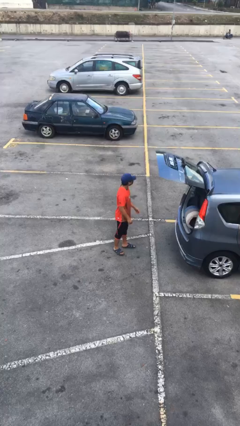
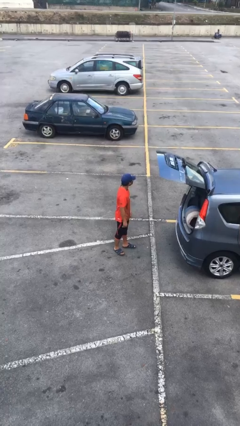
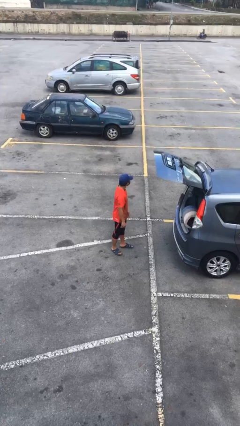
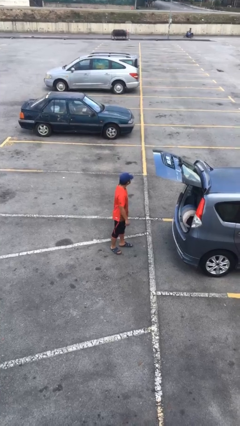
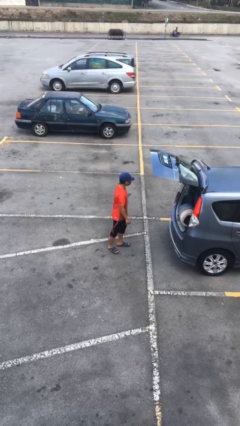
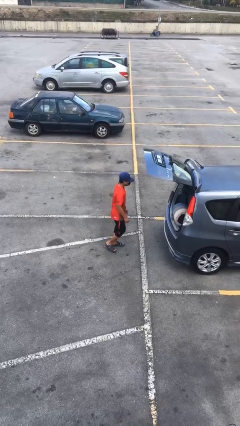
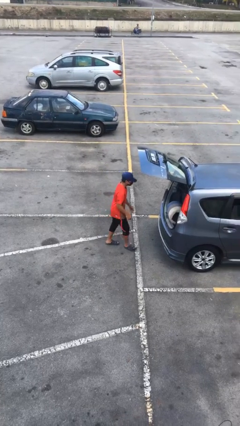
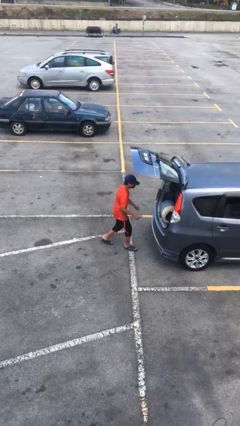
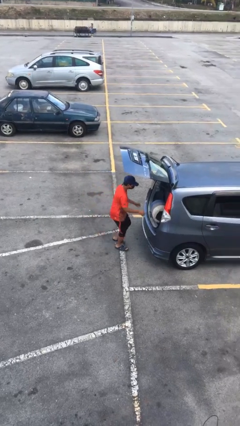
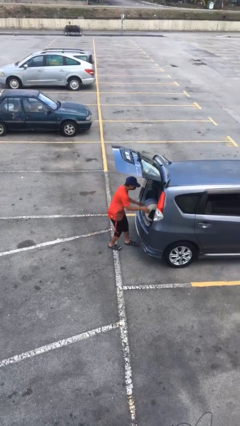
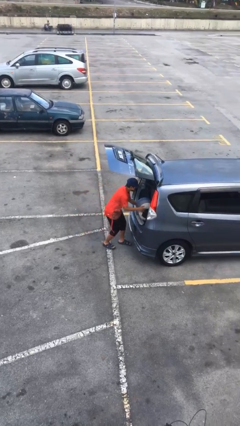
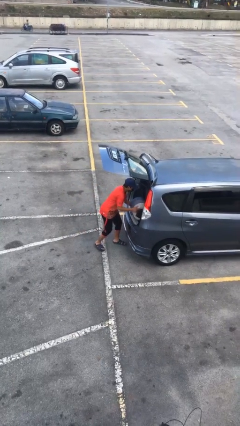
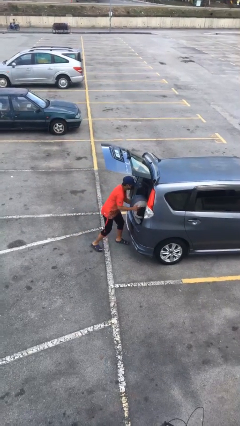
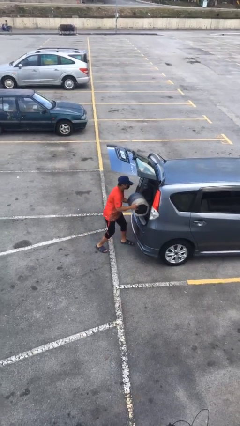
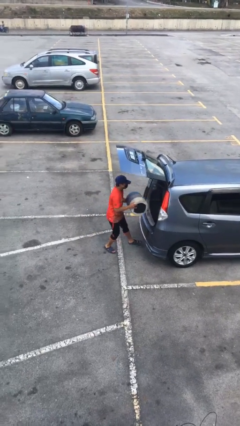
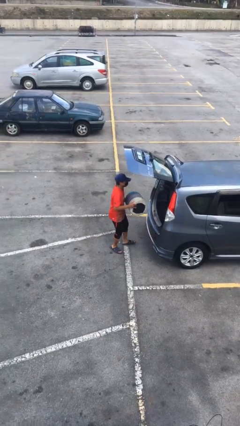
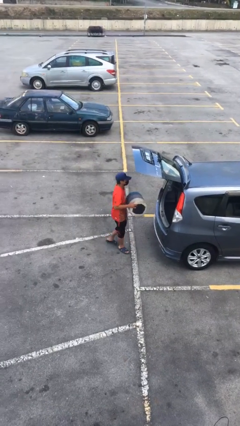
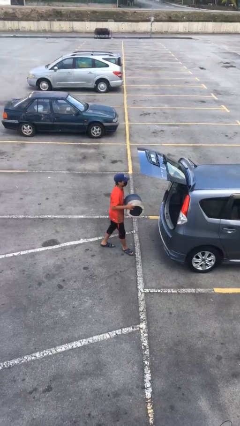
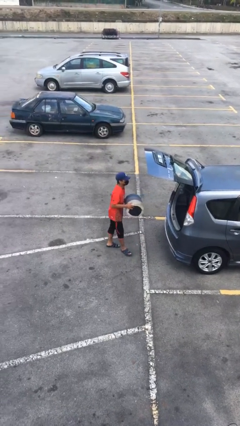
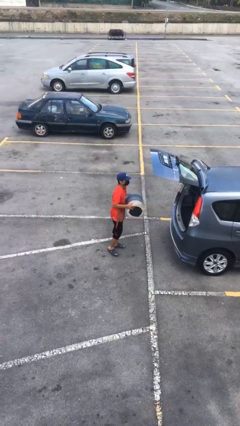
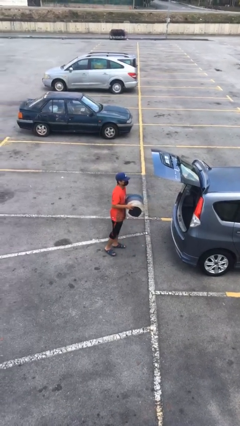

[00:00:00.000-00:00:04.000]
person unloads car

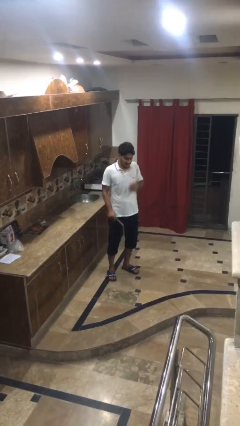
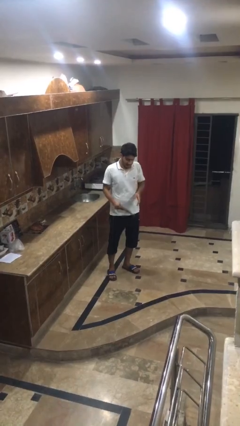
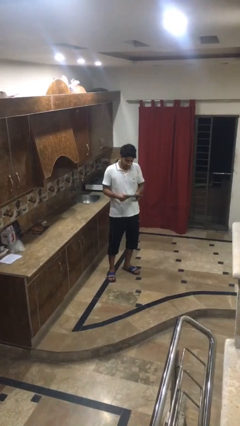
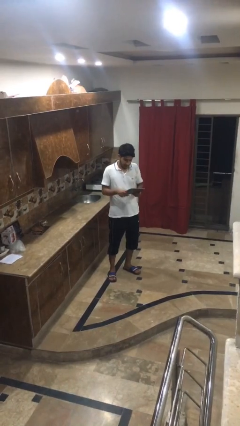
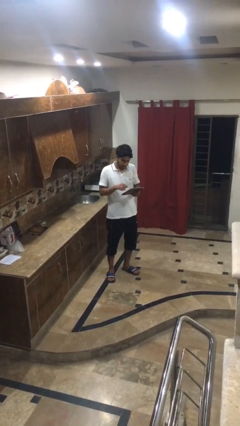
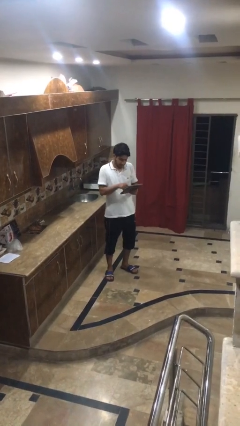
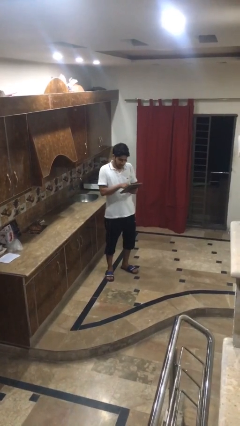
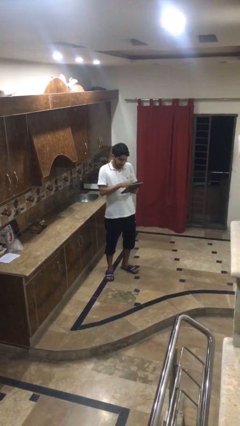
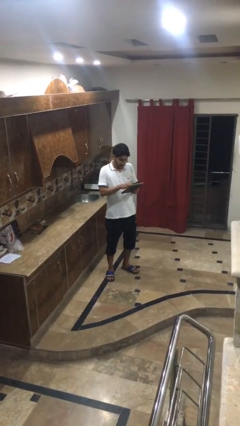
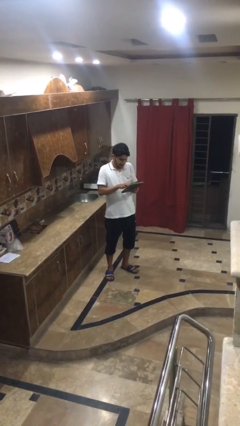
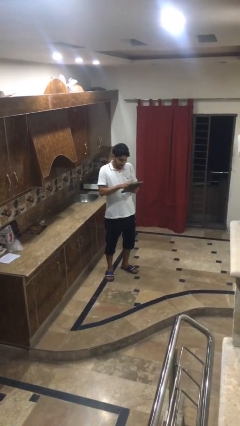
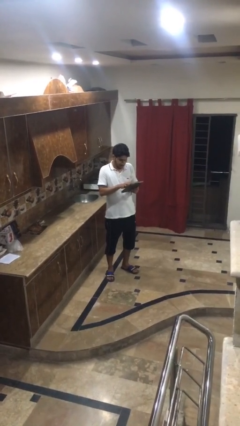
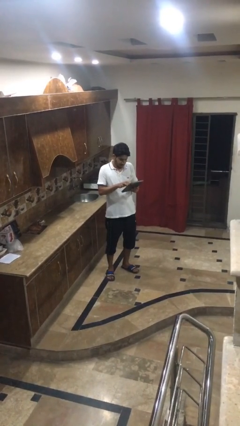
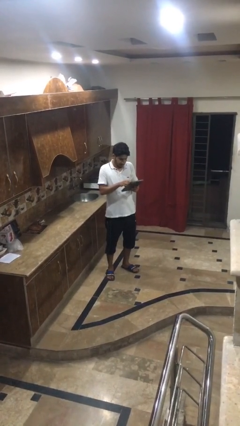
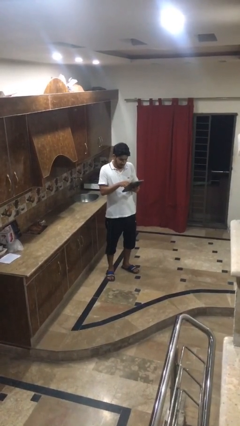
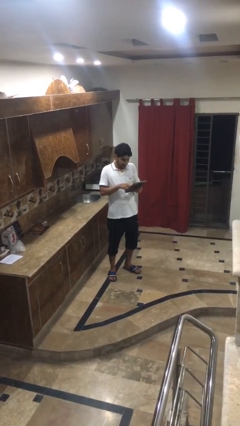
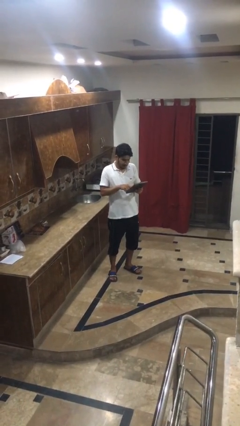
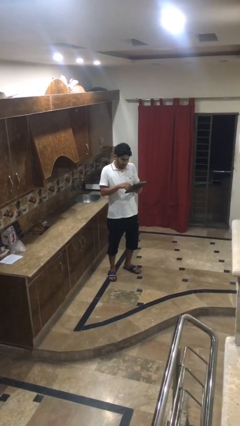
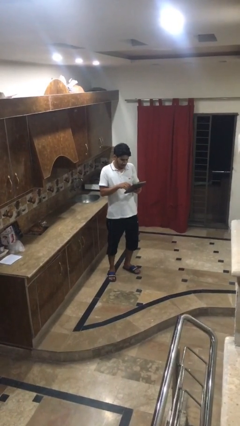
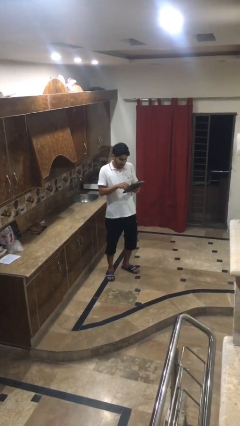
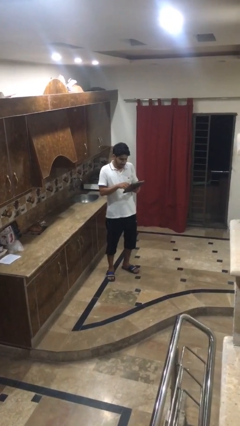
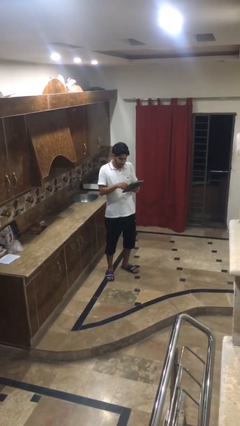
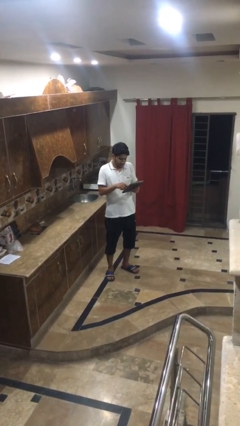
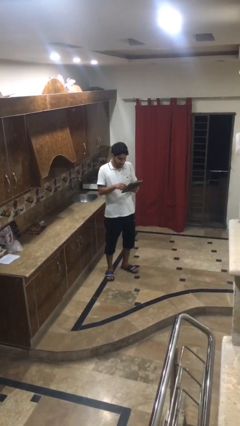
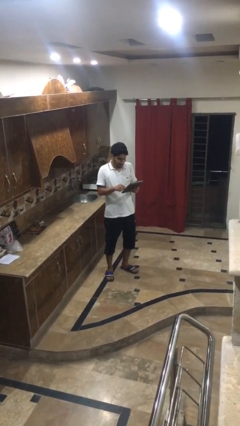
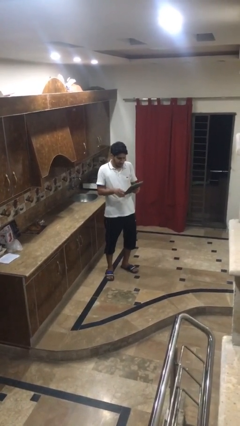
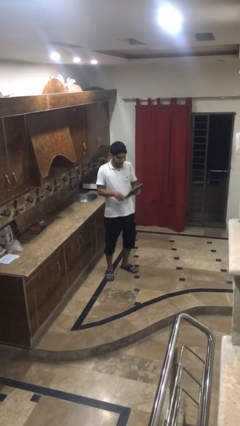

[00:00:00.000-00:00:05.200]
person interacts with tablet

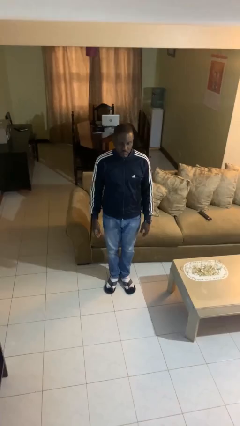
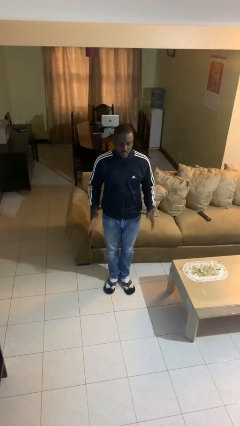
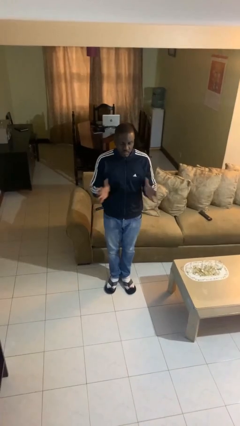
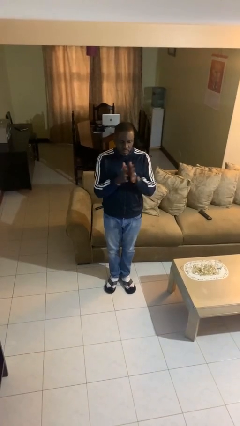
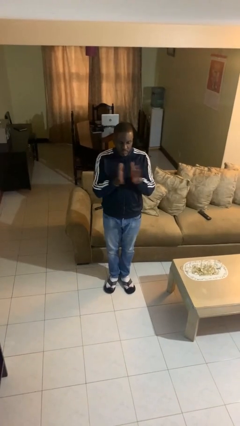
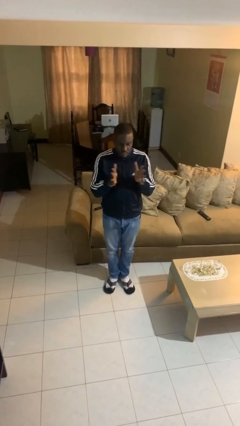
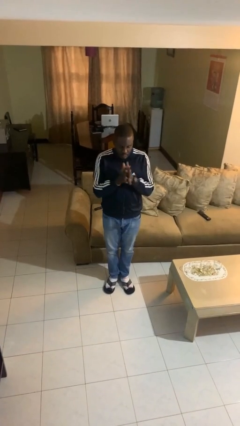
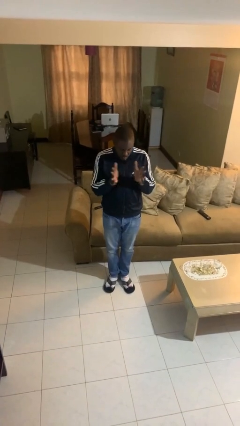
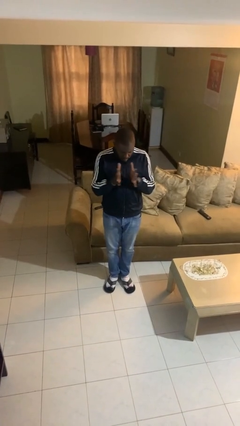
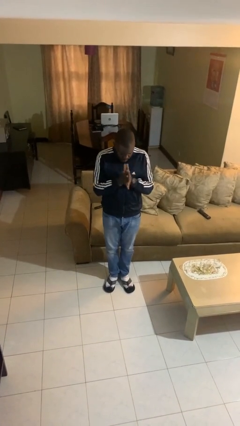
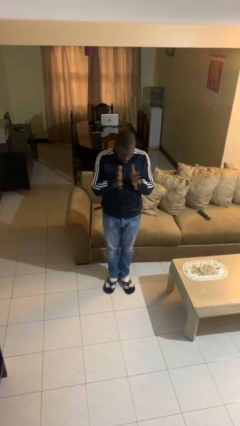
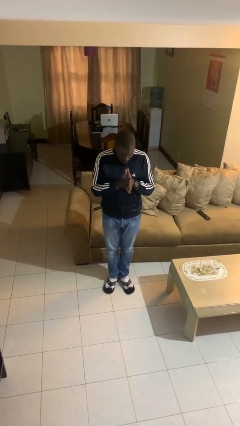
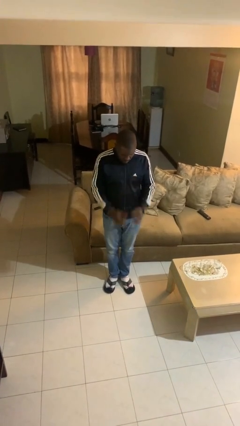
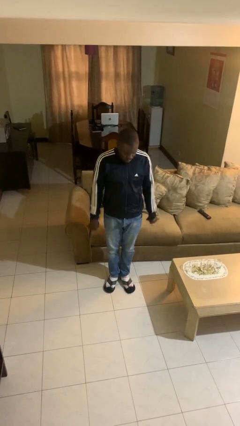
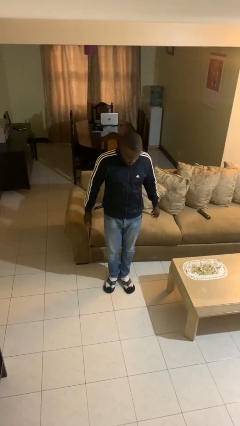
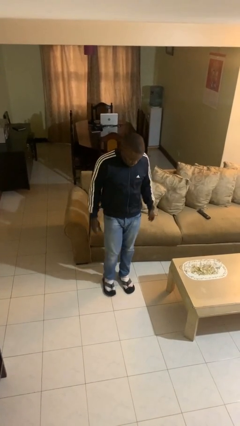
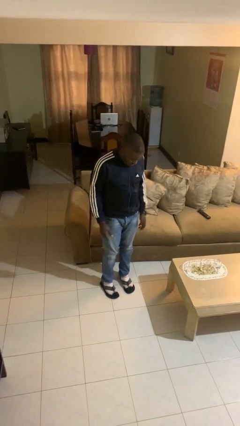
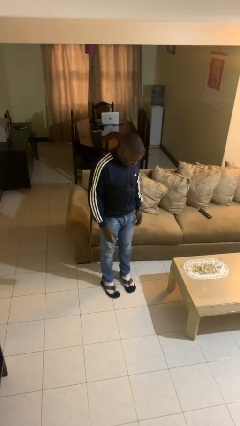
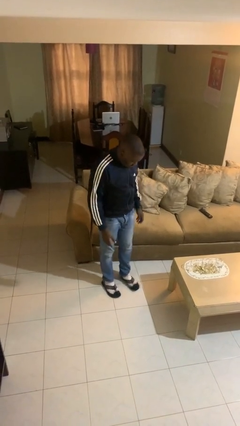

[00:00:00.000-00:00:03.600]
person claps hands

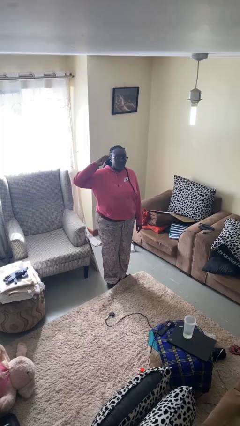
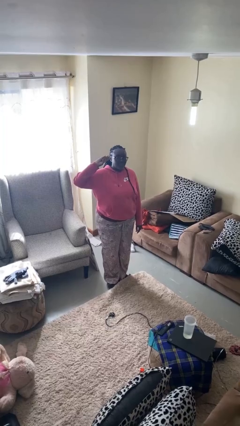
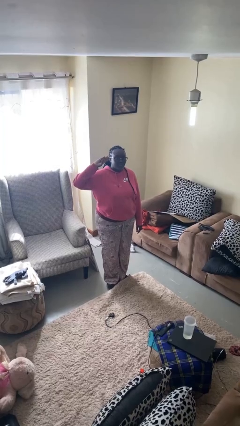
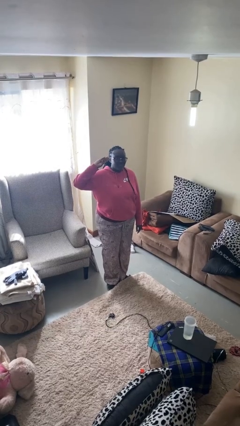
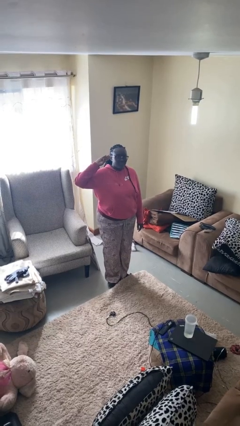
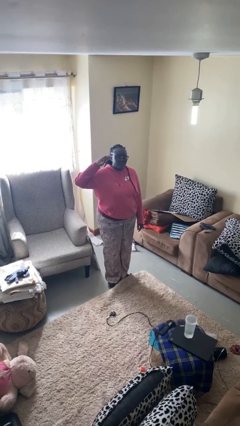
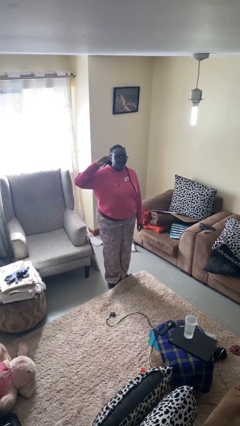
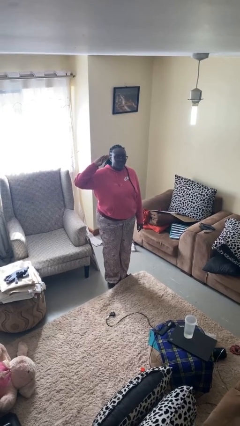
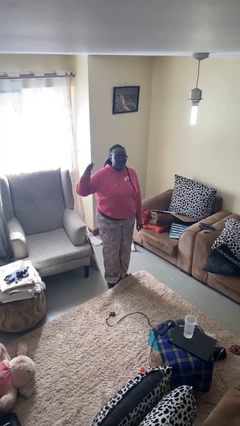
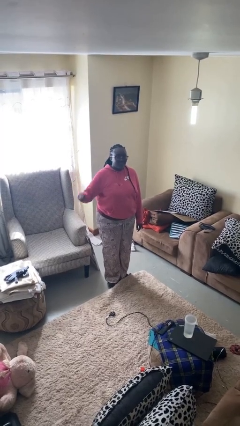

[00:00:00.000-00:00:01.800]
person salutes

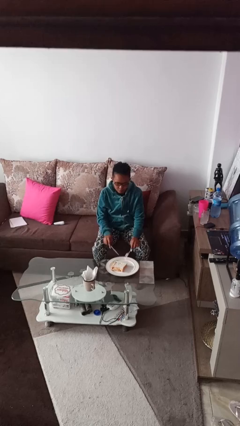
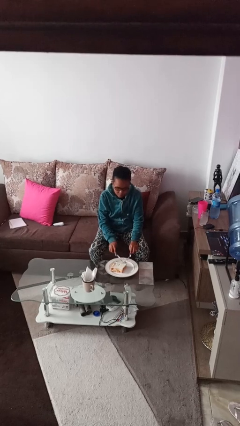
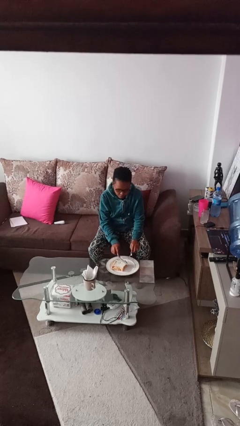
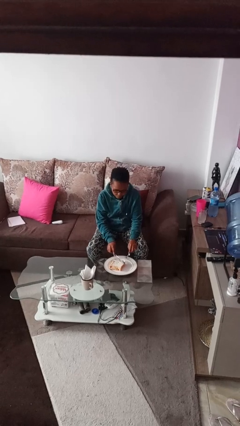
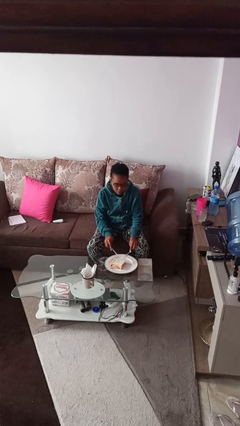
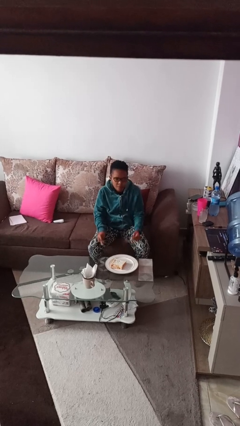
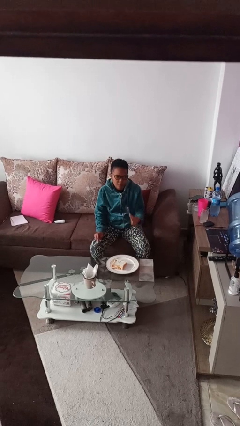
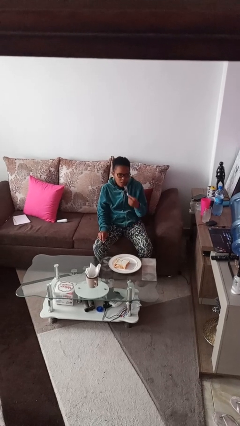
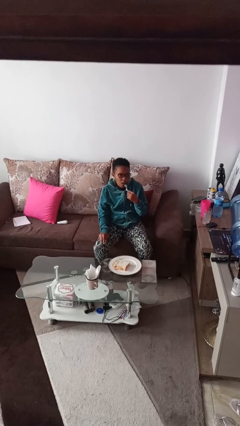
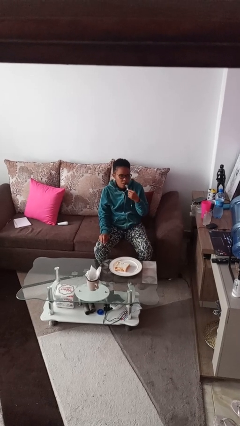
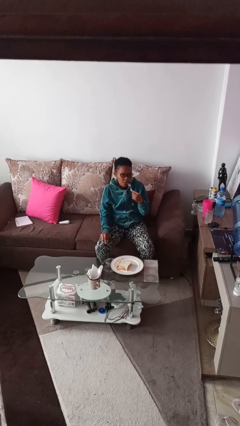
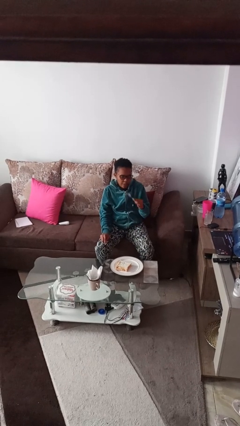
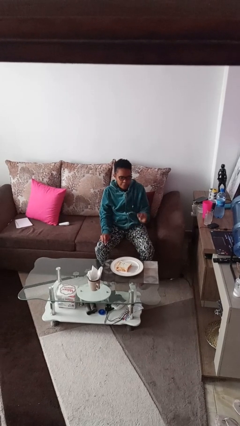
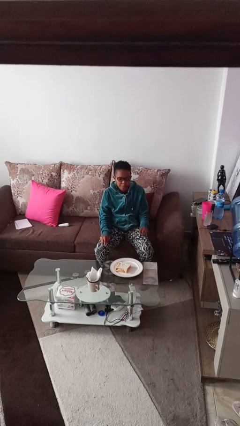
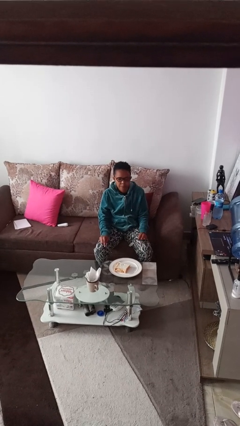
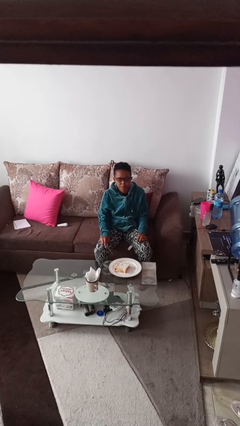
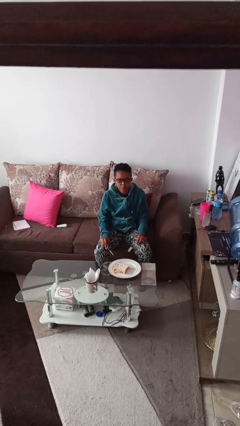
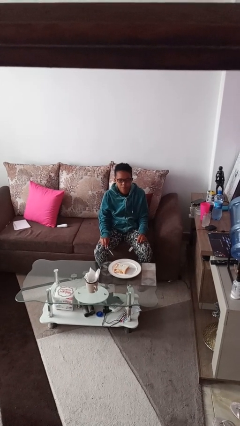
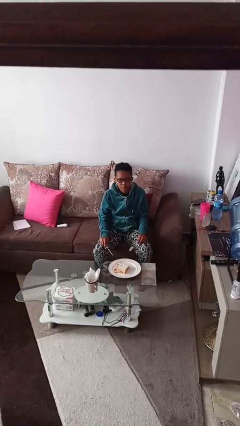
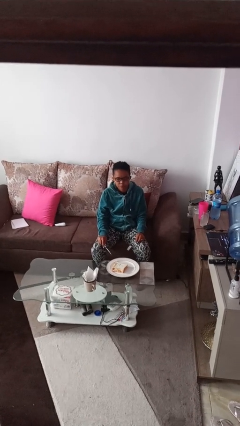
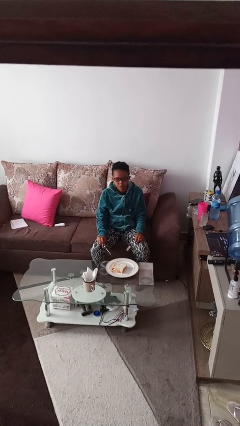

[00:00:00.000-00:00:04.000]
person eats with utensil
